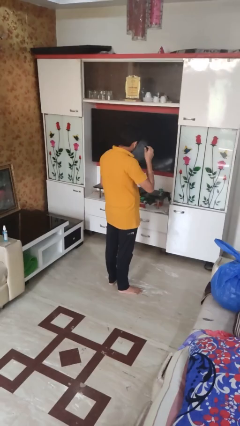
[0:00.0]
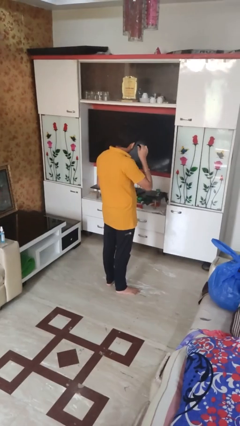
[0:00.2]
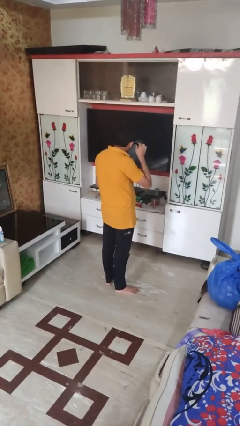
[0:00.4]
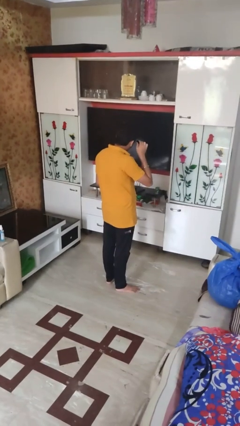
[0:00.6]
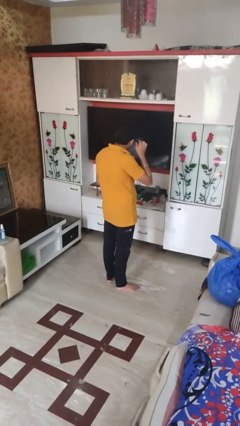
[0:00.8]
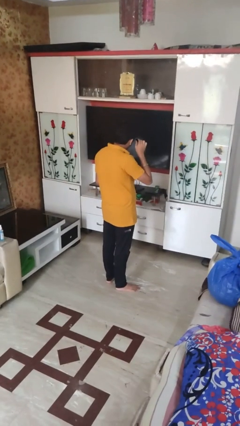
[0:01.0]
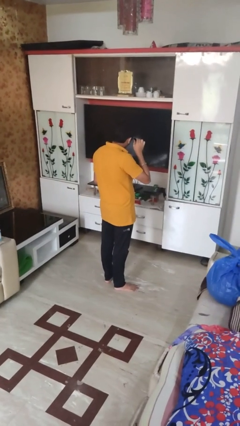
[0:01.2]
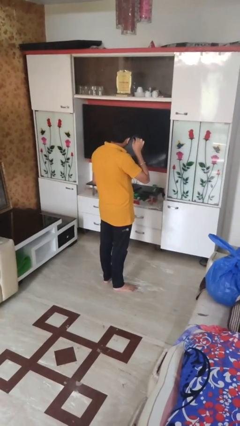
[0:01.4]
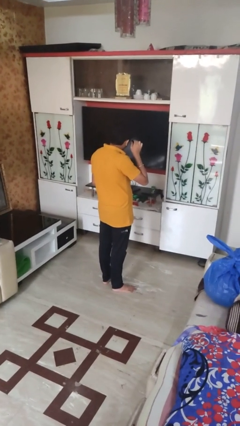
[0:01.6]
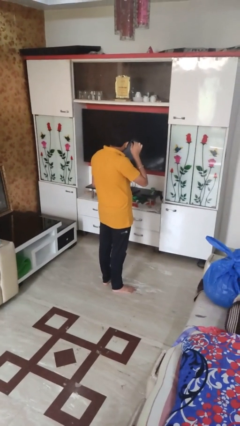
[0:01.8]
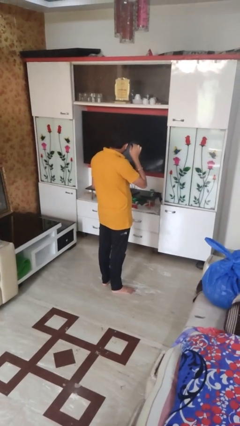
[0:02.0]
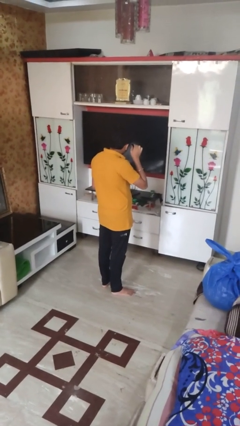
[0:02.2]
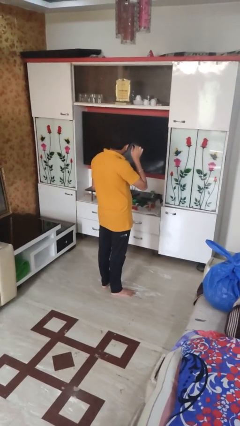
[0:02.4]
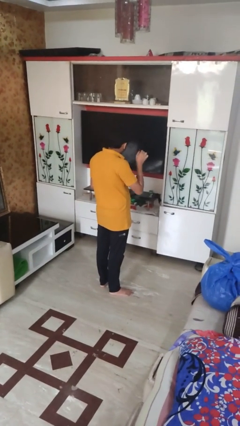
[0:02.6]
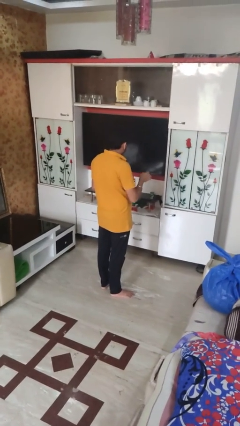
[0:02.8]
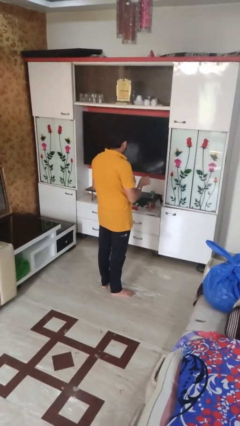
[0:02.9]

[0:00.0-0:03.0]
person applies eye makeup

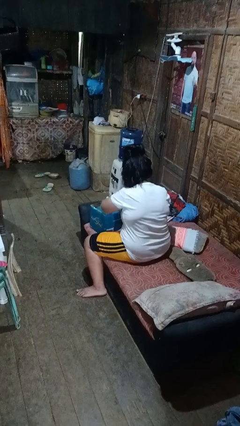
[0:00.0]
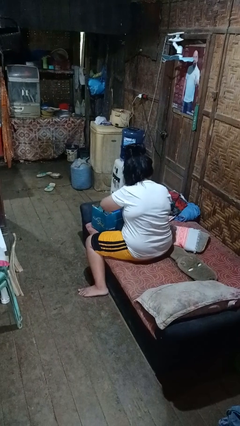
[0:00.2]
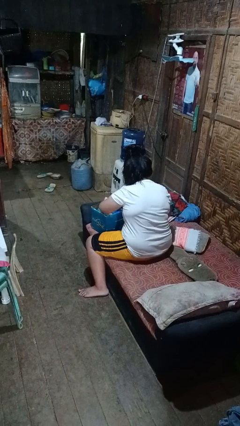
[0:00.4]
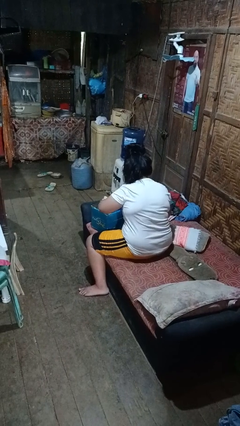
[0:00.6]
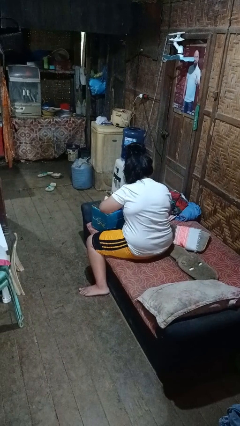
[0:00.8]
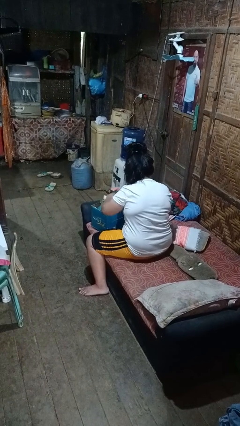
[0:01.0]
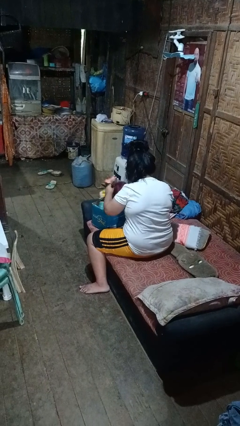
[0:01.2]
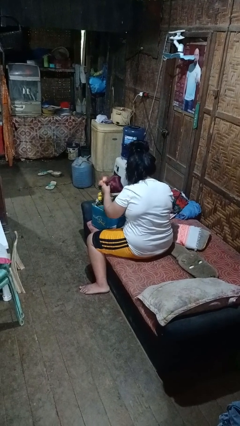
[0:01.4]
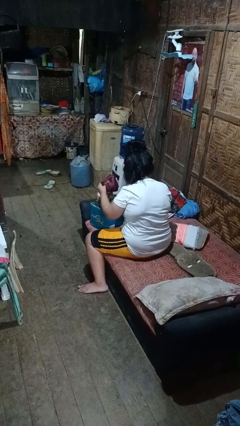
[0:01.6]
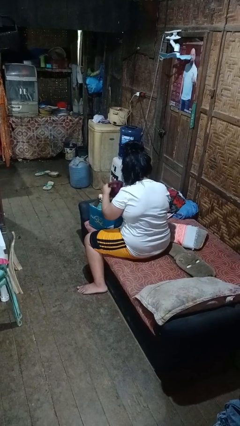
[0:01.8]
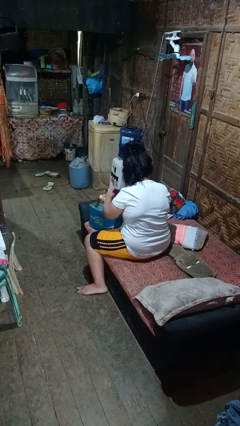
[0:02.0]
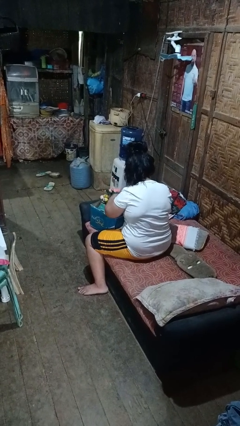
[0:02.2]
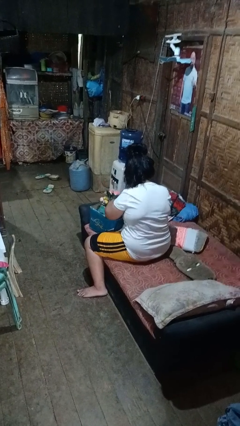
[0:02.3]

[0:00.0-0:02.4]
person searches in box

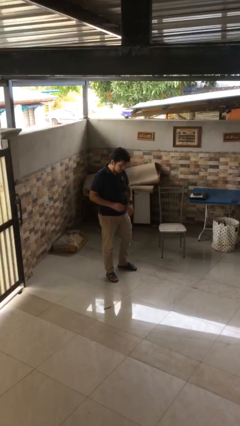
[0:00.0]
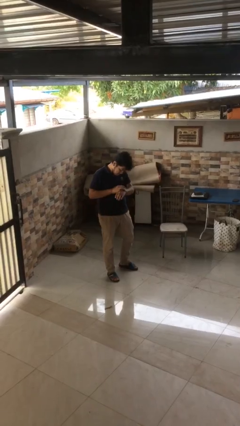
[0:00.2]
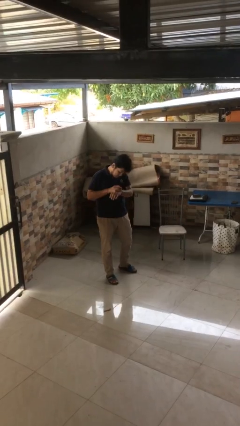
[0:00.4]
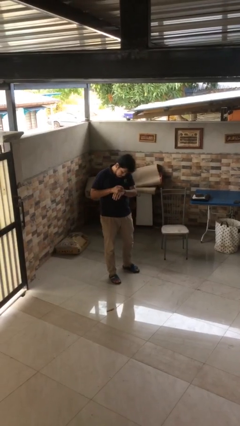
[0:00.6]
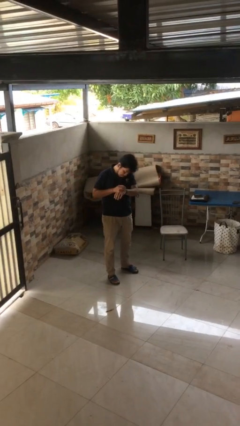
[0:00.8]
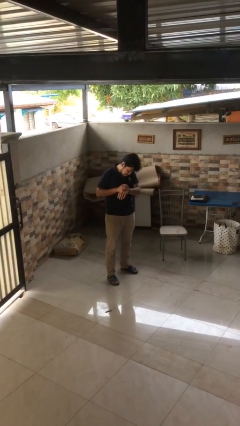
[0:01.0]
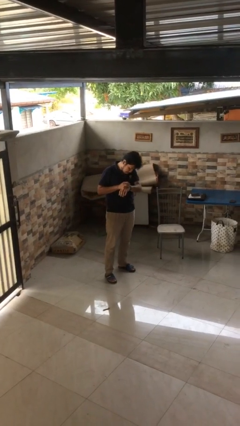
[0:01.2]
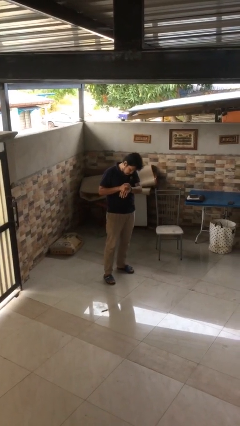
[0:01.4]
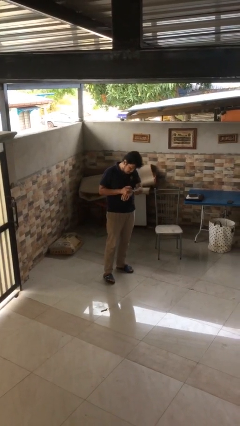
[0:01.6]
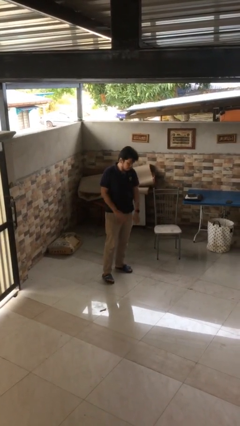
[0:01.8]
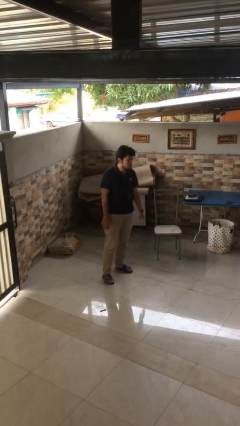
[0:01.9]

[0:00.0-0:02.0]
person looks at wristwatch

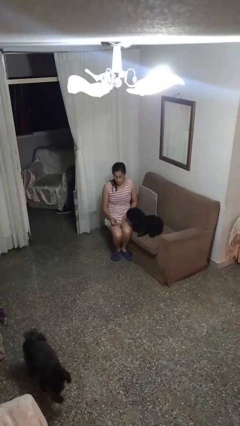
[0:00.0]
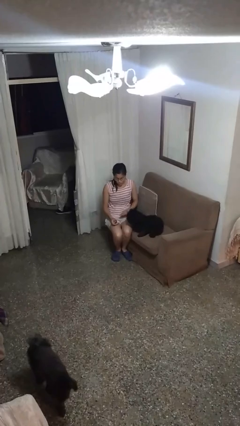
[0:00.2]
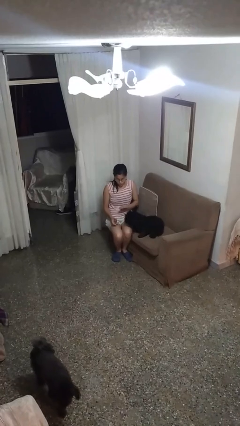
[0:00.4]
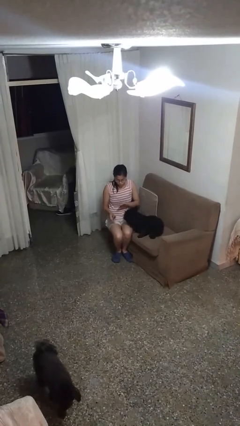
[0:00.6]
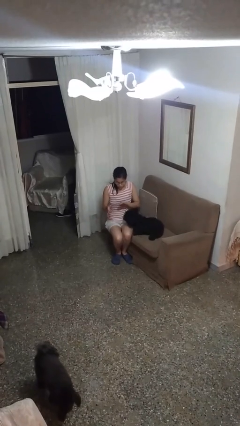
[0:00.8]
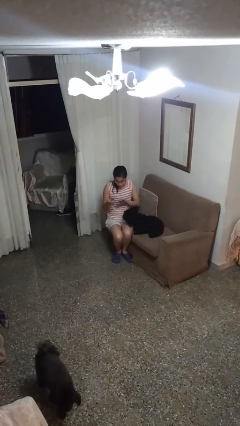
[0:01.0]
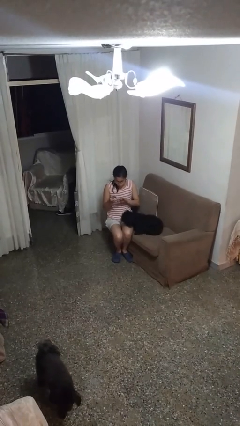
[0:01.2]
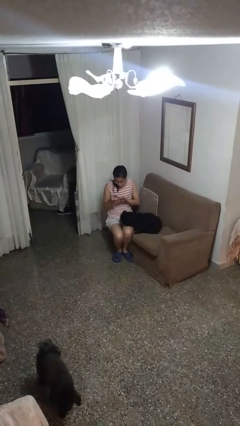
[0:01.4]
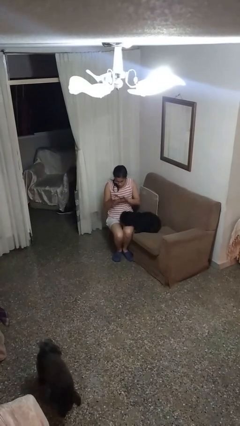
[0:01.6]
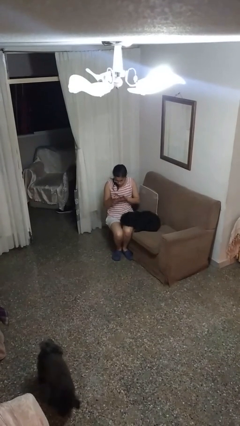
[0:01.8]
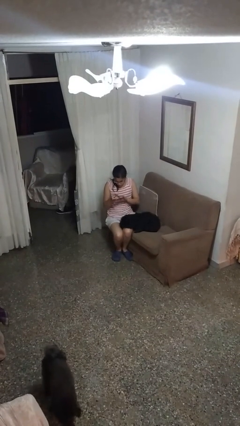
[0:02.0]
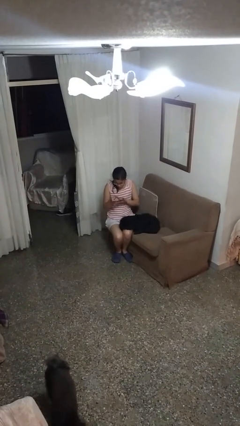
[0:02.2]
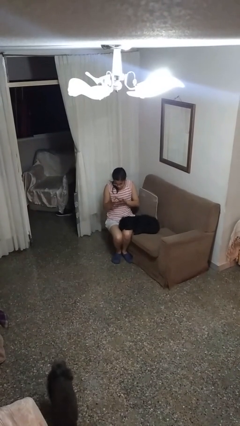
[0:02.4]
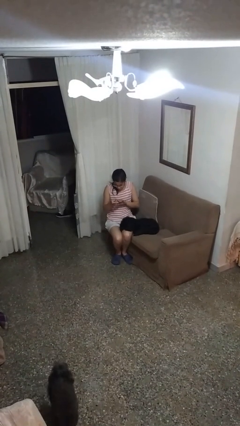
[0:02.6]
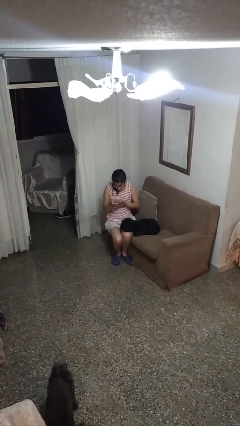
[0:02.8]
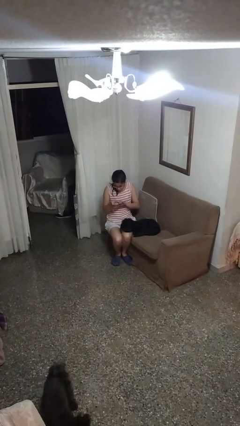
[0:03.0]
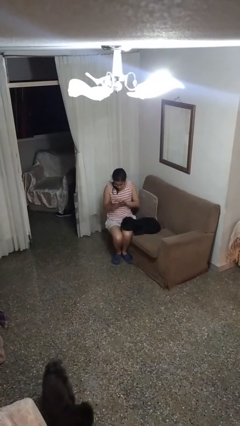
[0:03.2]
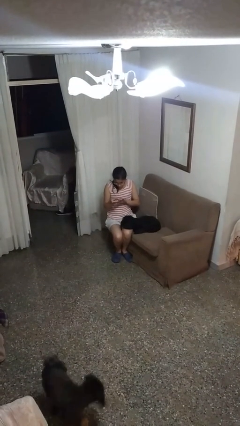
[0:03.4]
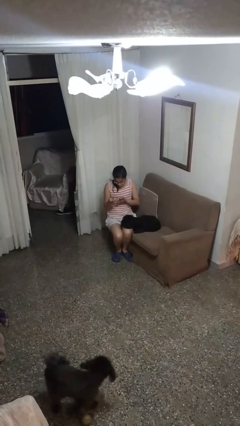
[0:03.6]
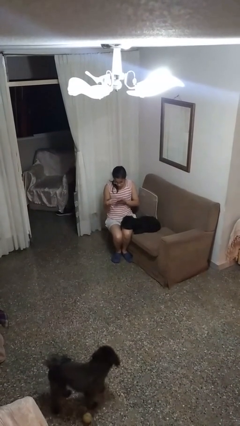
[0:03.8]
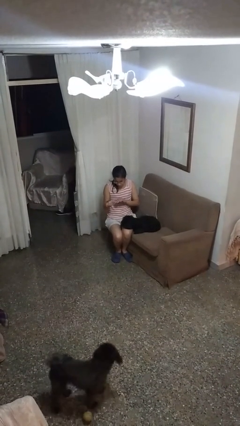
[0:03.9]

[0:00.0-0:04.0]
person clips fingernails

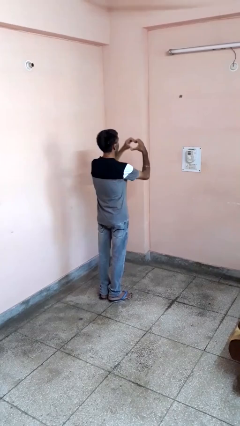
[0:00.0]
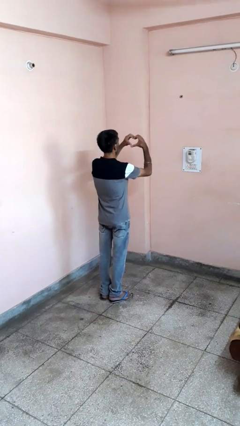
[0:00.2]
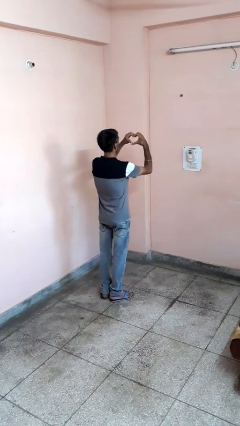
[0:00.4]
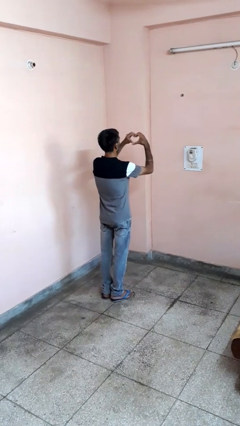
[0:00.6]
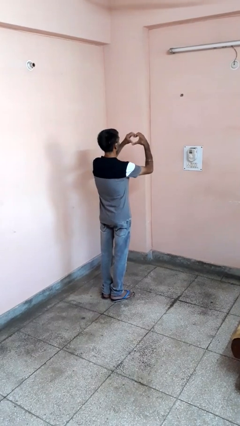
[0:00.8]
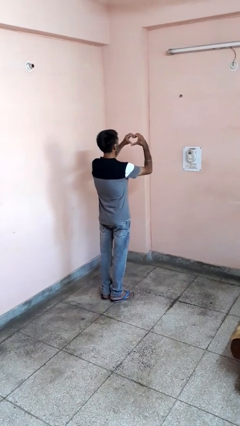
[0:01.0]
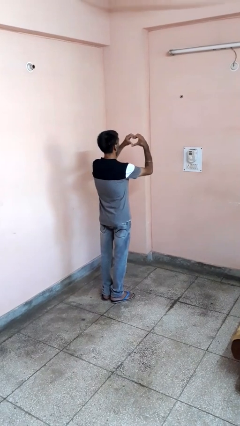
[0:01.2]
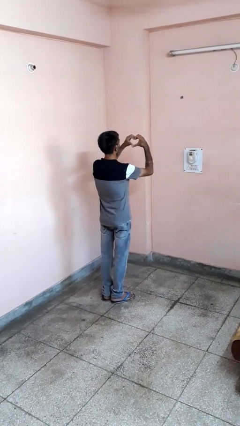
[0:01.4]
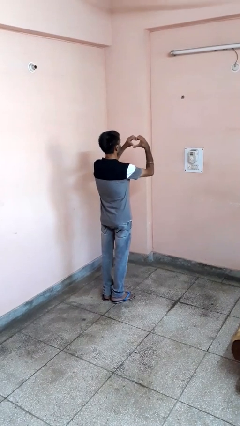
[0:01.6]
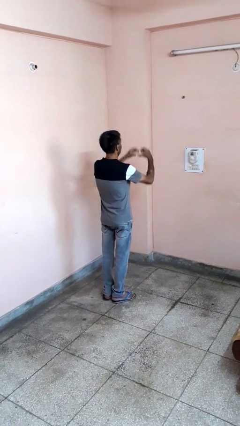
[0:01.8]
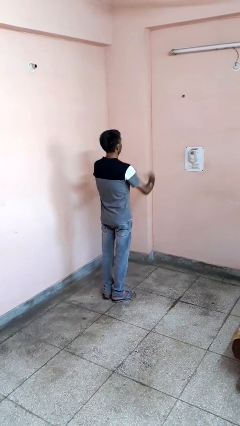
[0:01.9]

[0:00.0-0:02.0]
person gestures heart

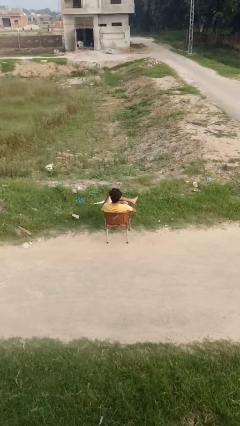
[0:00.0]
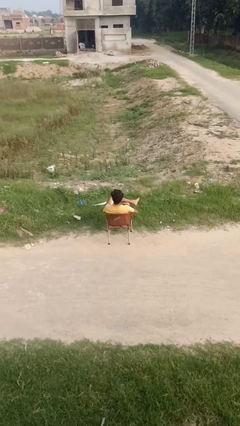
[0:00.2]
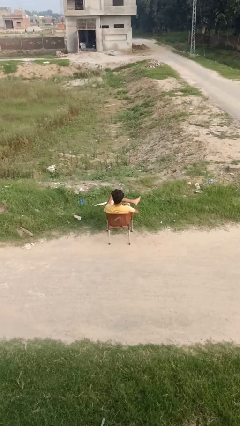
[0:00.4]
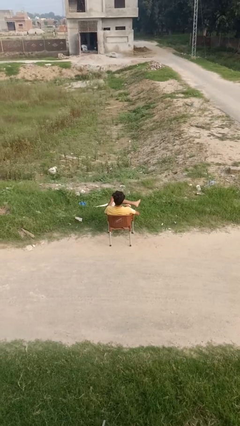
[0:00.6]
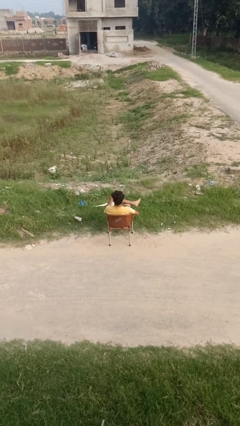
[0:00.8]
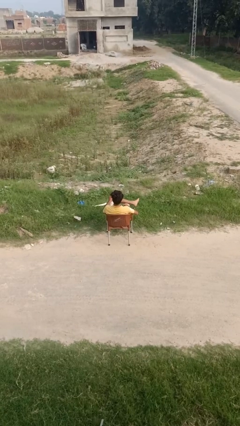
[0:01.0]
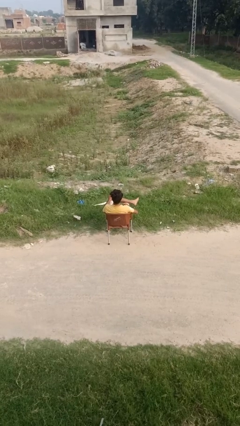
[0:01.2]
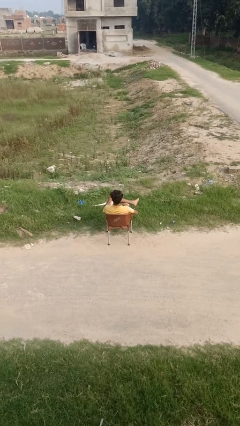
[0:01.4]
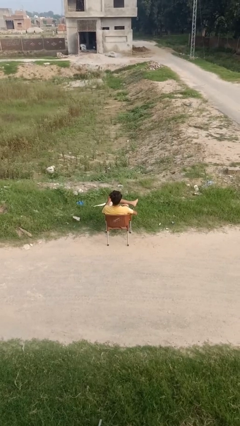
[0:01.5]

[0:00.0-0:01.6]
person stubs toe

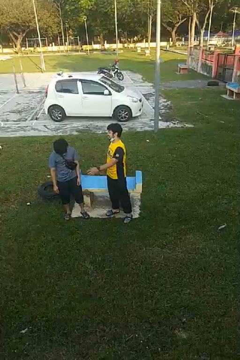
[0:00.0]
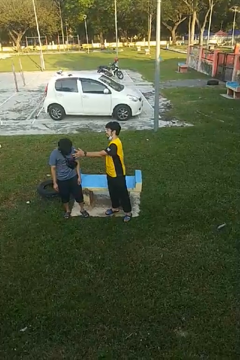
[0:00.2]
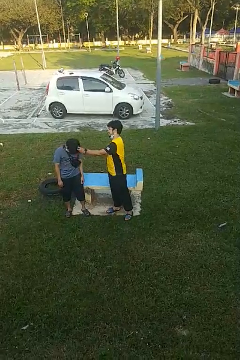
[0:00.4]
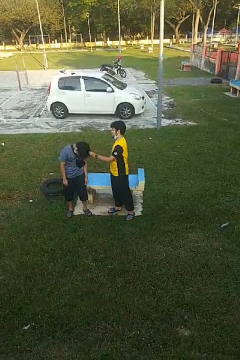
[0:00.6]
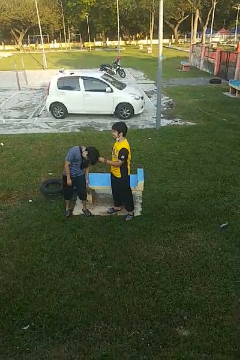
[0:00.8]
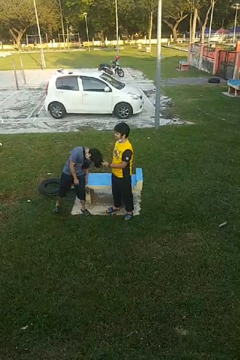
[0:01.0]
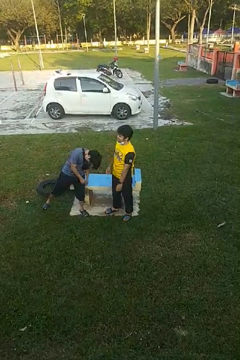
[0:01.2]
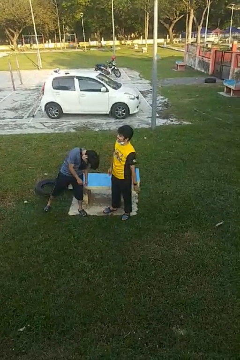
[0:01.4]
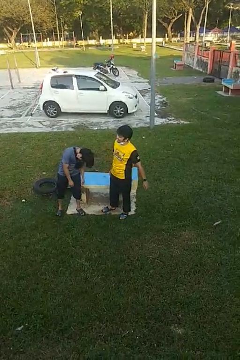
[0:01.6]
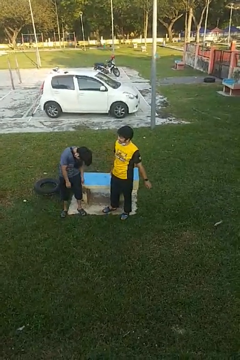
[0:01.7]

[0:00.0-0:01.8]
person grabs person by hair

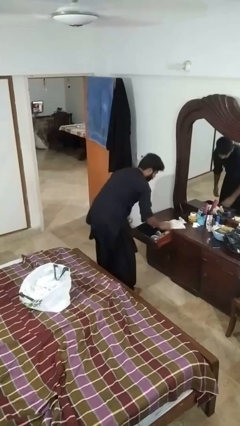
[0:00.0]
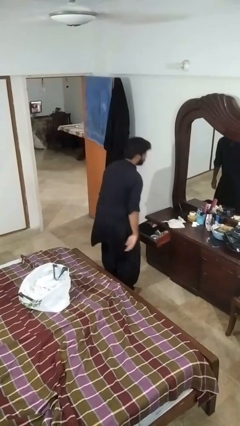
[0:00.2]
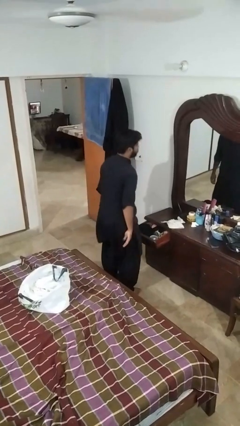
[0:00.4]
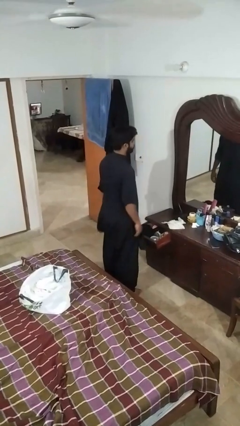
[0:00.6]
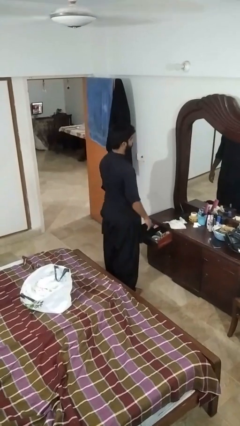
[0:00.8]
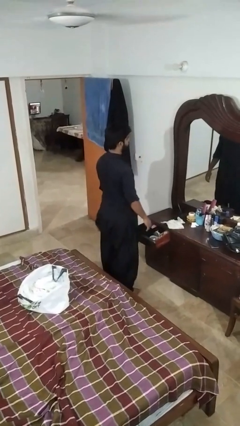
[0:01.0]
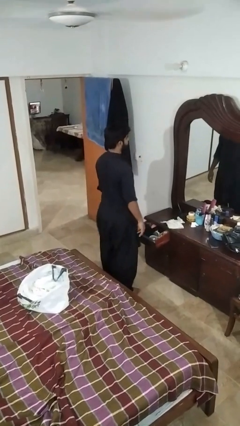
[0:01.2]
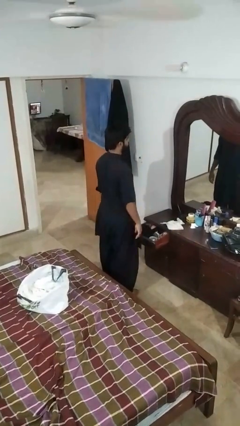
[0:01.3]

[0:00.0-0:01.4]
person takes clothes from dresser
